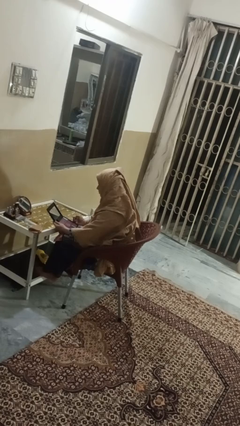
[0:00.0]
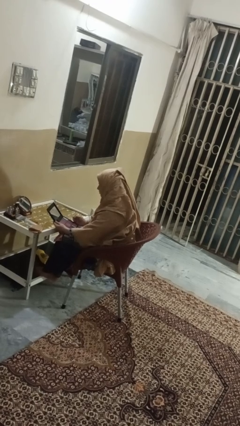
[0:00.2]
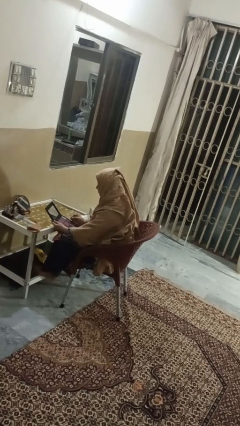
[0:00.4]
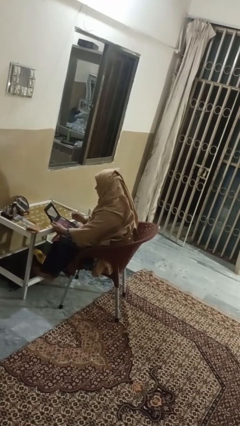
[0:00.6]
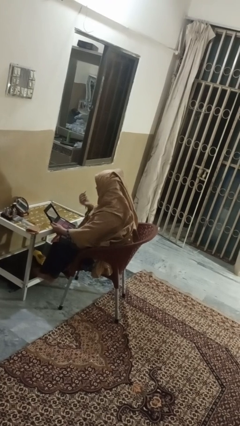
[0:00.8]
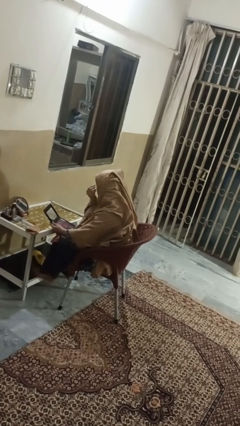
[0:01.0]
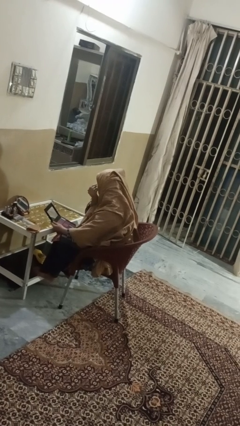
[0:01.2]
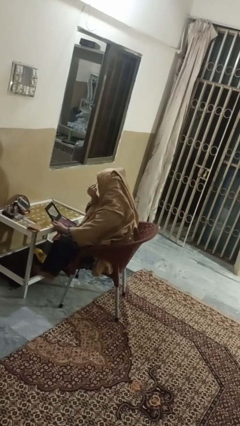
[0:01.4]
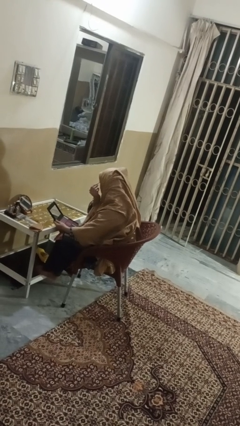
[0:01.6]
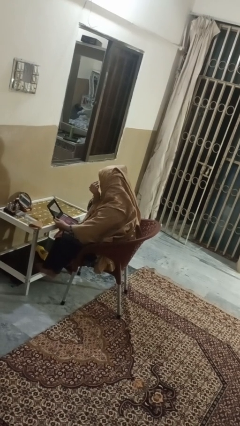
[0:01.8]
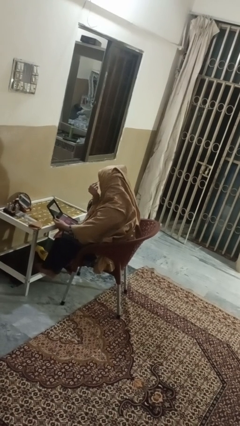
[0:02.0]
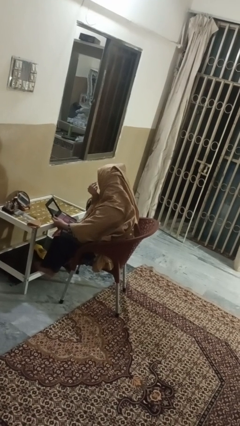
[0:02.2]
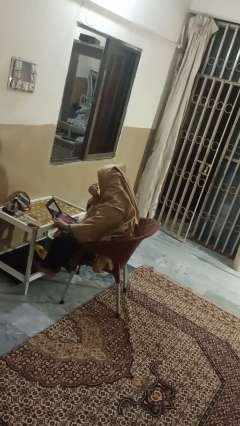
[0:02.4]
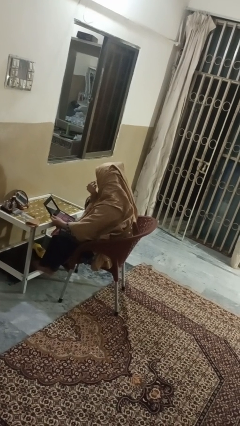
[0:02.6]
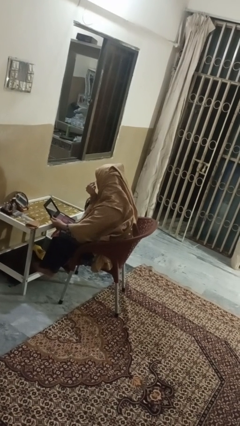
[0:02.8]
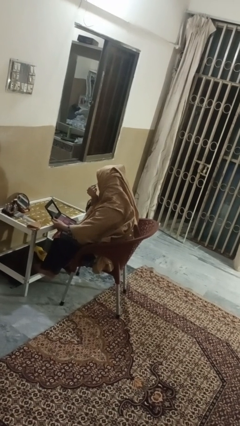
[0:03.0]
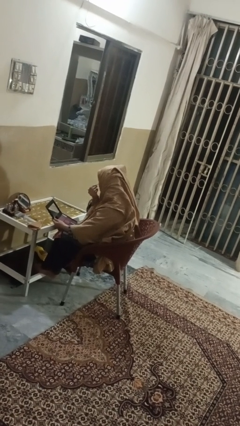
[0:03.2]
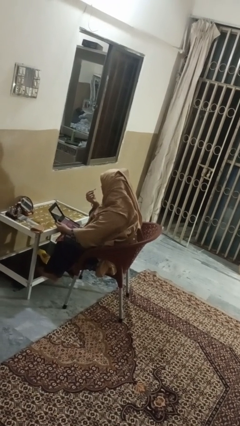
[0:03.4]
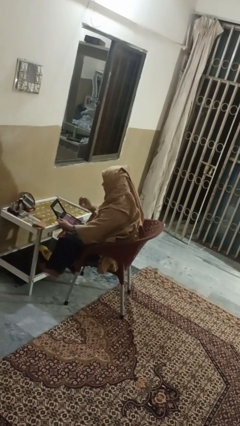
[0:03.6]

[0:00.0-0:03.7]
person applies eye makeup

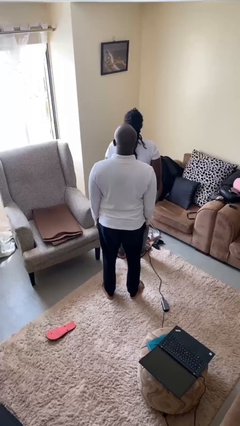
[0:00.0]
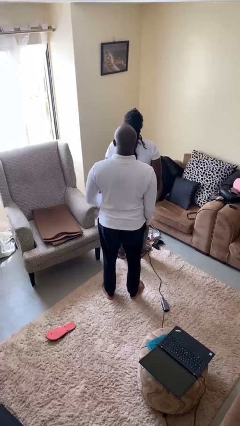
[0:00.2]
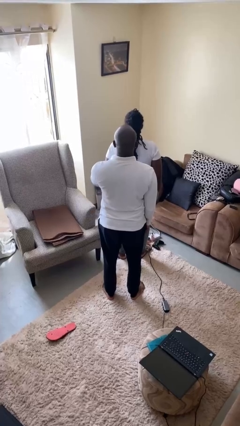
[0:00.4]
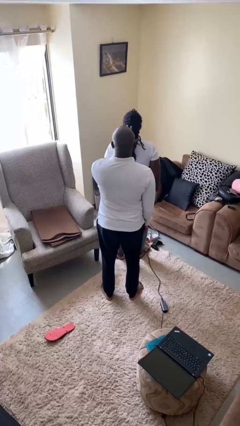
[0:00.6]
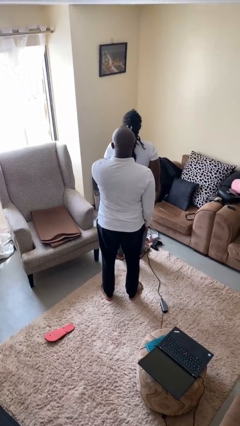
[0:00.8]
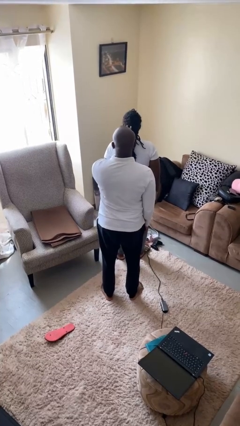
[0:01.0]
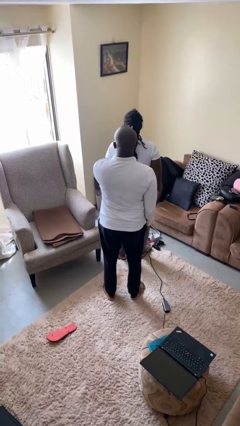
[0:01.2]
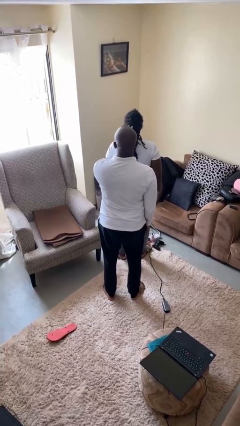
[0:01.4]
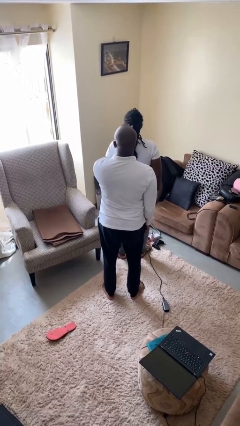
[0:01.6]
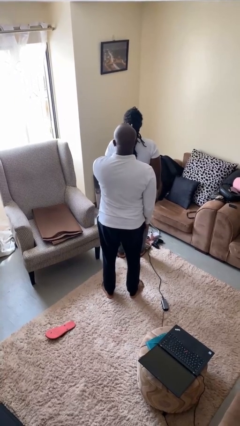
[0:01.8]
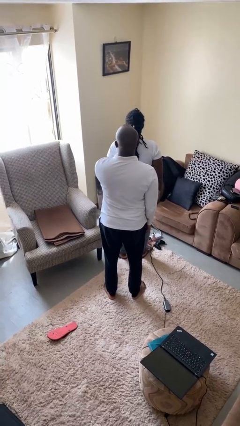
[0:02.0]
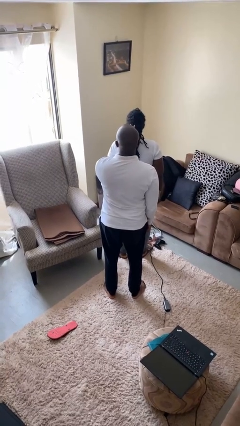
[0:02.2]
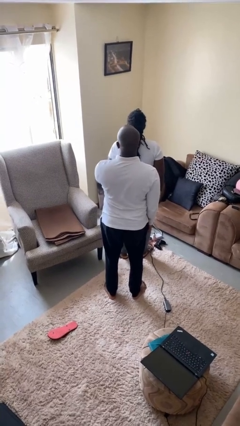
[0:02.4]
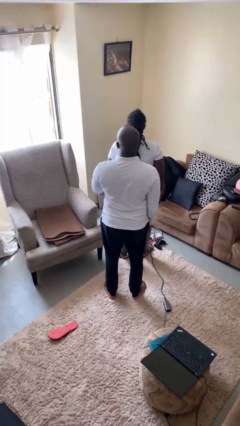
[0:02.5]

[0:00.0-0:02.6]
person grabs person by hair

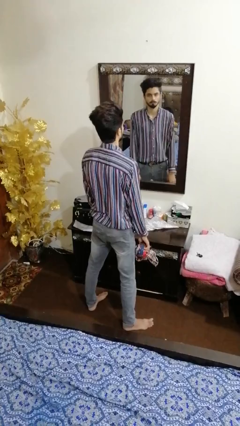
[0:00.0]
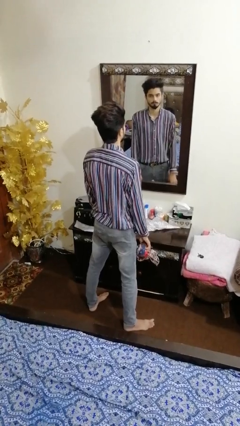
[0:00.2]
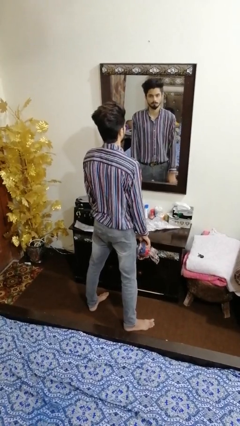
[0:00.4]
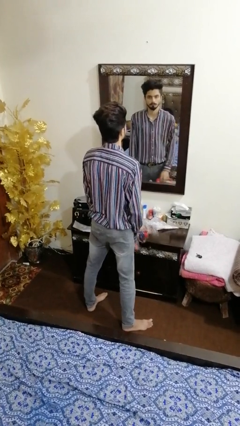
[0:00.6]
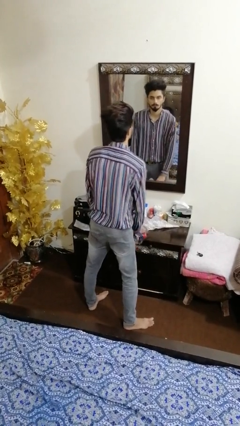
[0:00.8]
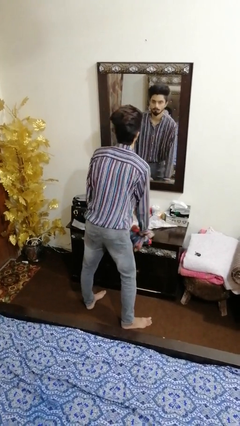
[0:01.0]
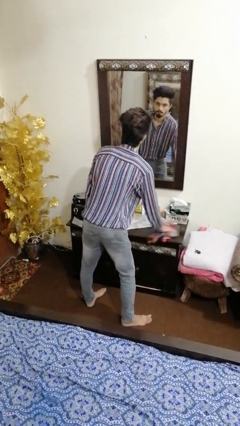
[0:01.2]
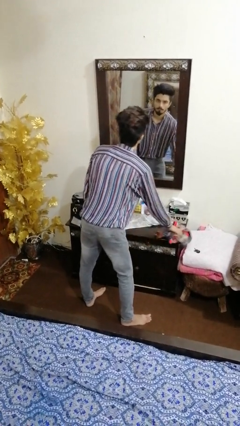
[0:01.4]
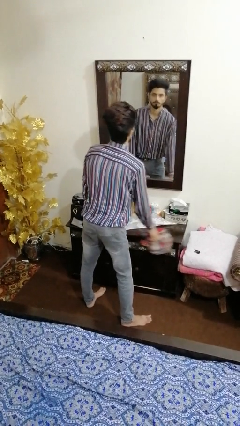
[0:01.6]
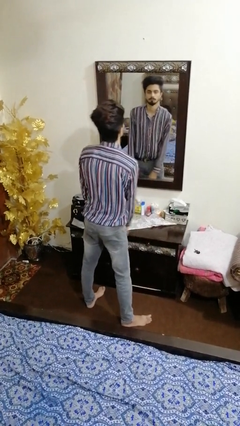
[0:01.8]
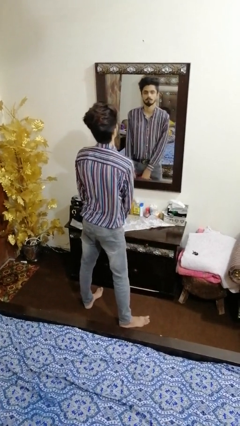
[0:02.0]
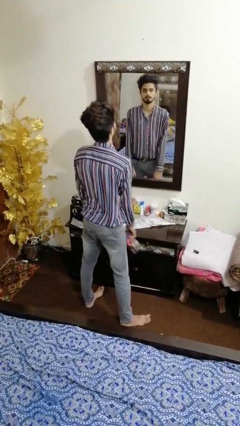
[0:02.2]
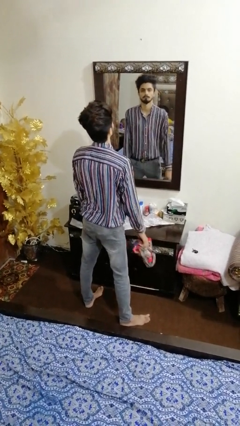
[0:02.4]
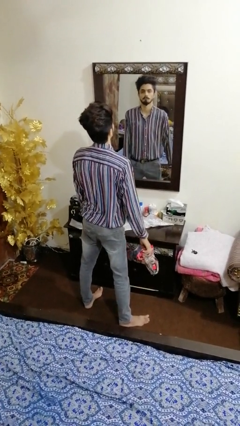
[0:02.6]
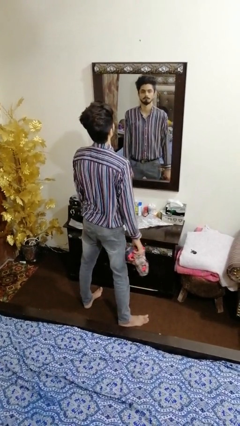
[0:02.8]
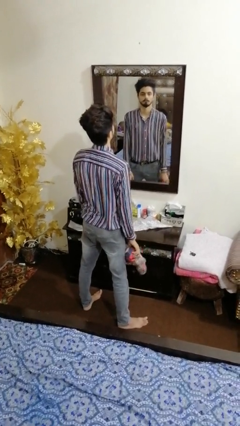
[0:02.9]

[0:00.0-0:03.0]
person cleans table with rag

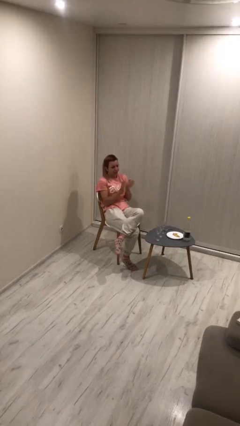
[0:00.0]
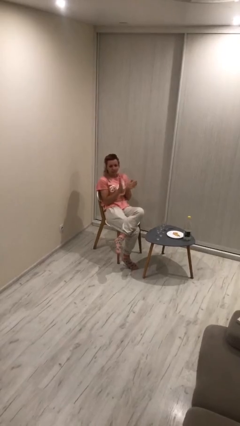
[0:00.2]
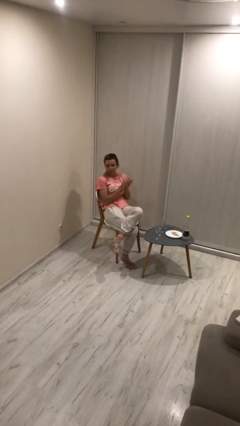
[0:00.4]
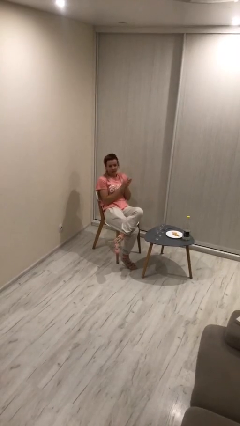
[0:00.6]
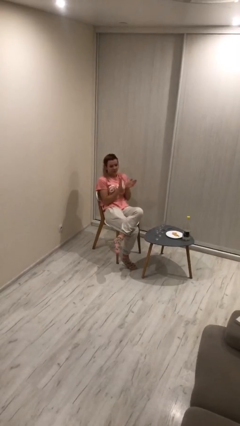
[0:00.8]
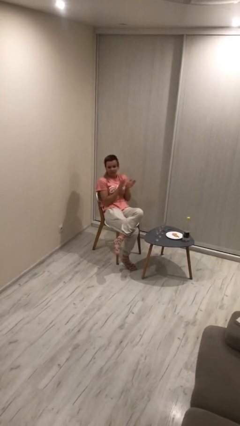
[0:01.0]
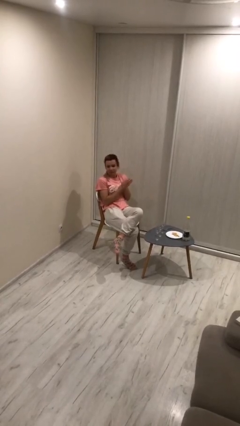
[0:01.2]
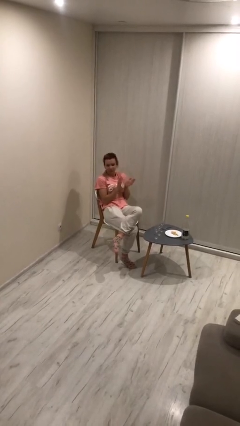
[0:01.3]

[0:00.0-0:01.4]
person claps hands

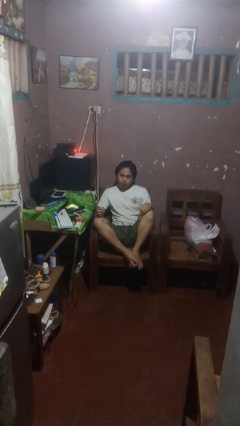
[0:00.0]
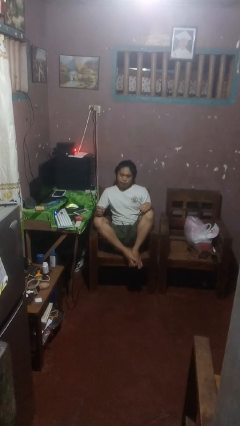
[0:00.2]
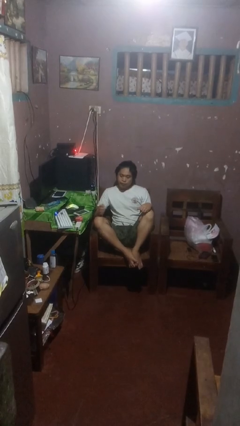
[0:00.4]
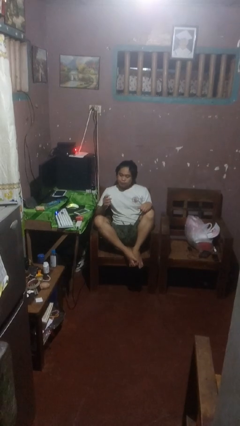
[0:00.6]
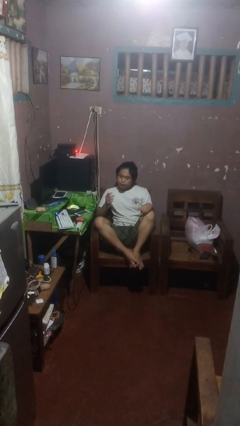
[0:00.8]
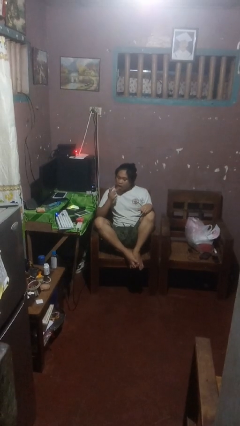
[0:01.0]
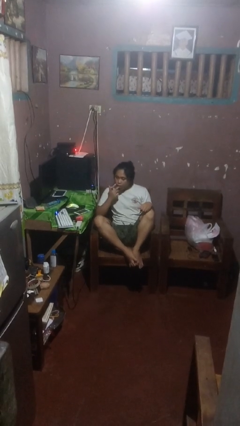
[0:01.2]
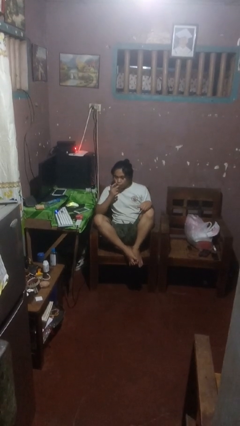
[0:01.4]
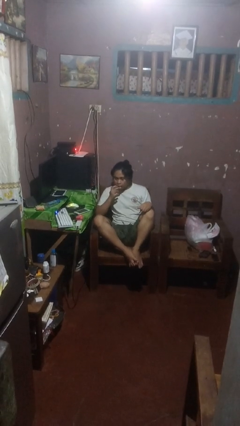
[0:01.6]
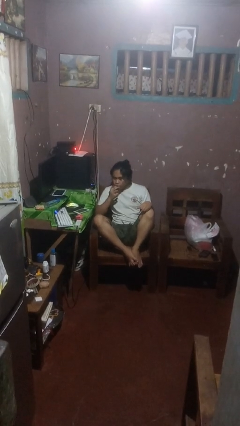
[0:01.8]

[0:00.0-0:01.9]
person licks fingers

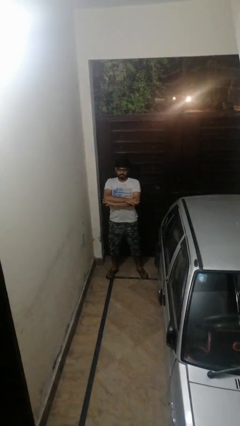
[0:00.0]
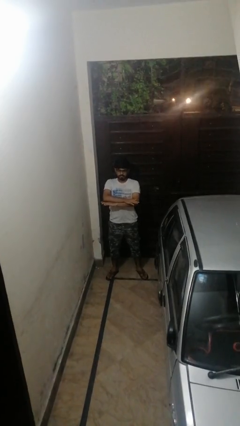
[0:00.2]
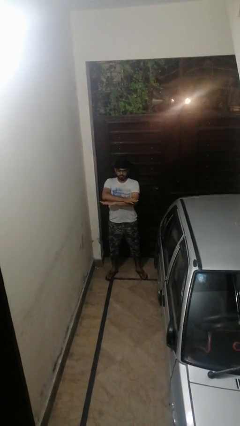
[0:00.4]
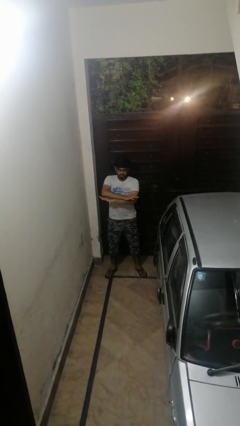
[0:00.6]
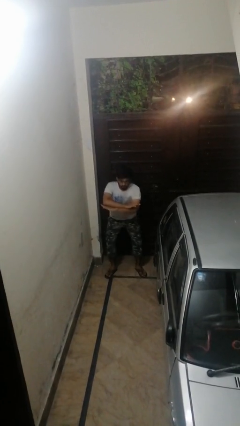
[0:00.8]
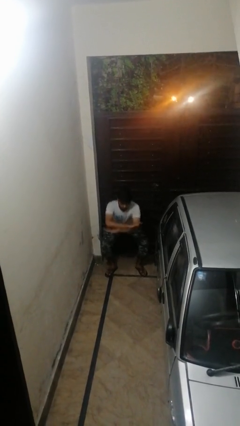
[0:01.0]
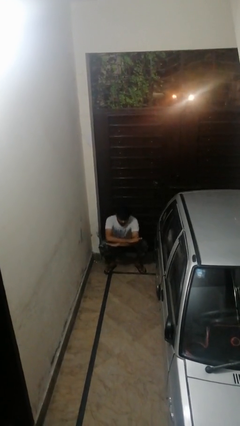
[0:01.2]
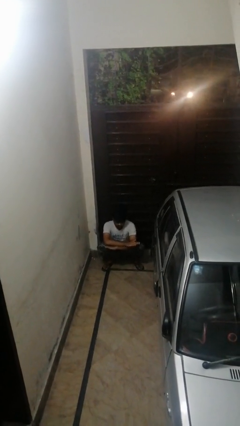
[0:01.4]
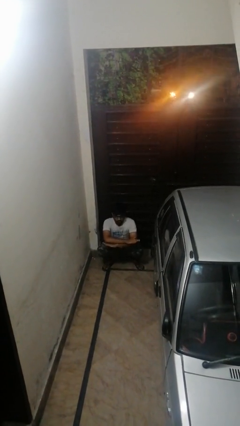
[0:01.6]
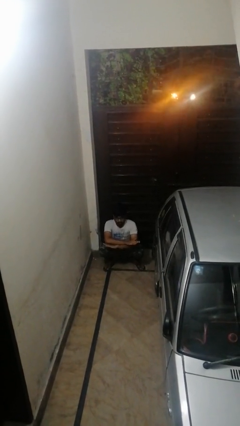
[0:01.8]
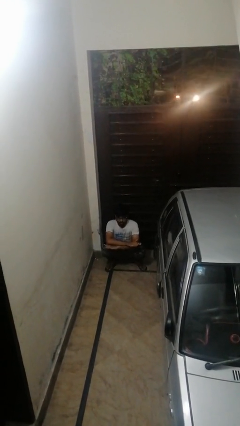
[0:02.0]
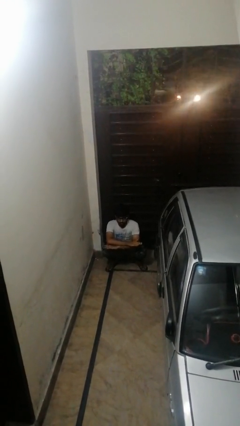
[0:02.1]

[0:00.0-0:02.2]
person squats

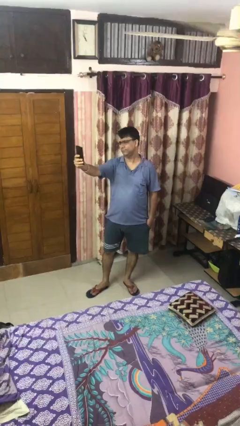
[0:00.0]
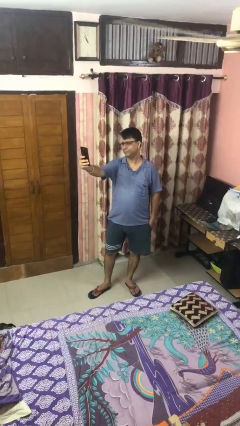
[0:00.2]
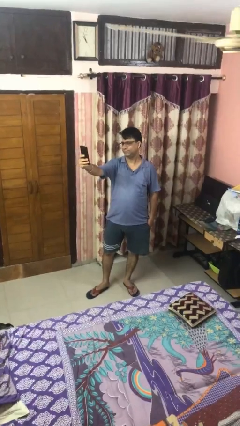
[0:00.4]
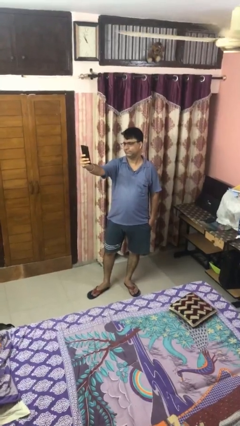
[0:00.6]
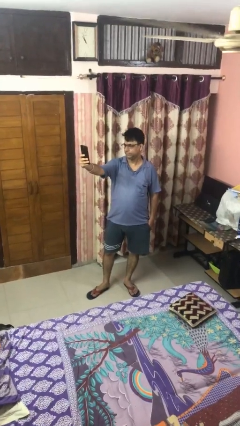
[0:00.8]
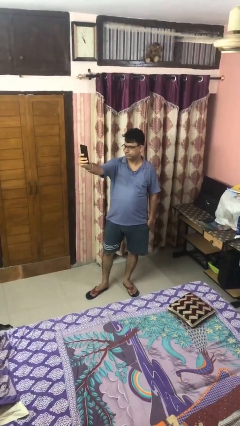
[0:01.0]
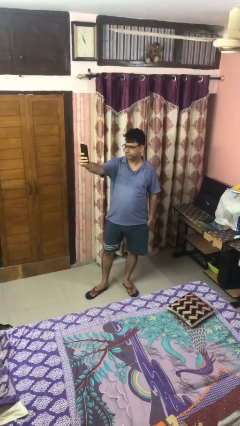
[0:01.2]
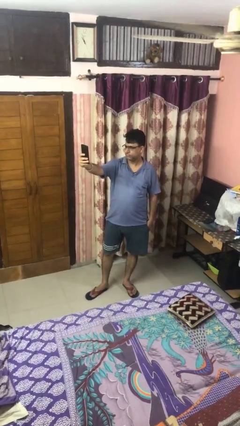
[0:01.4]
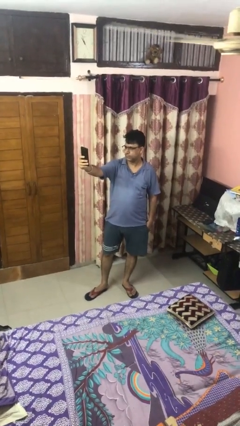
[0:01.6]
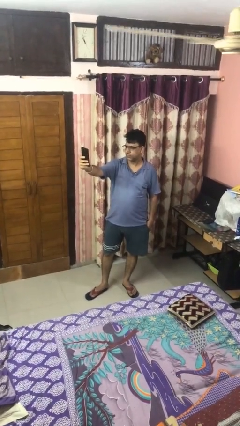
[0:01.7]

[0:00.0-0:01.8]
person takes selfie

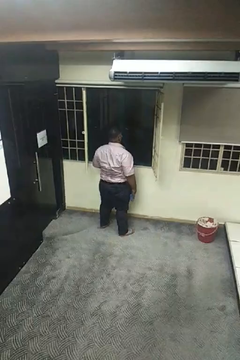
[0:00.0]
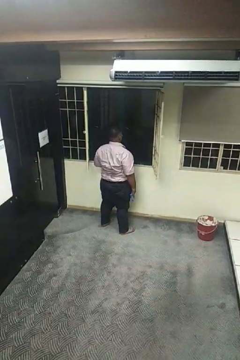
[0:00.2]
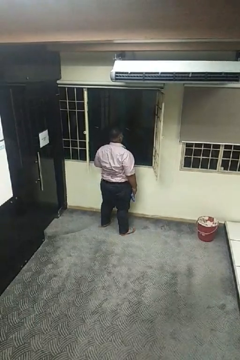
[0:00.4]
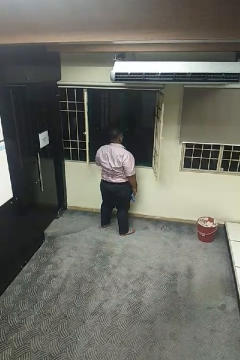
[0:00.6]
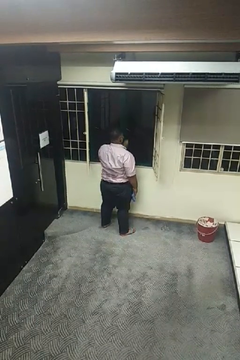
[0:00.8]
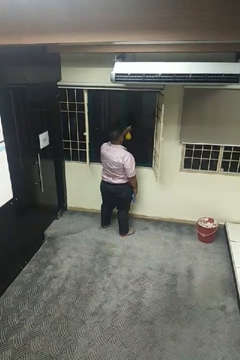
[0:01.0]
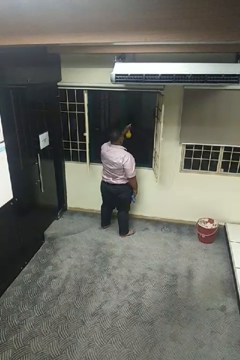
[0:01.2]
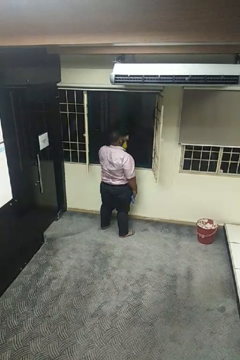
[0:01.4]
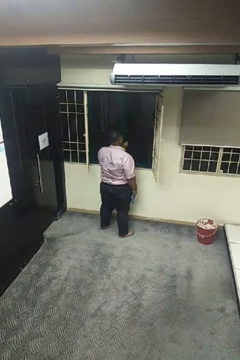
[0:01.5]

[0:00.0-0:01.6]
person sprays from bottle
